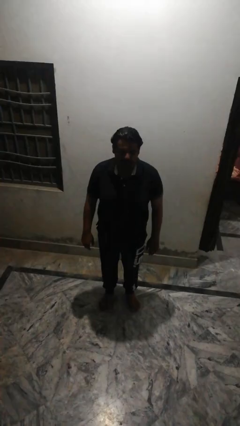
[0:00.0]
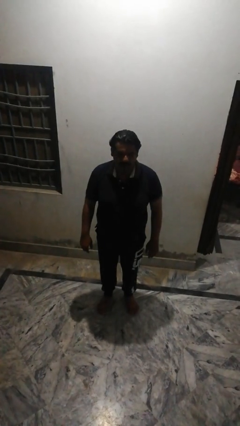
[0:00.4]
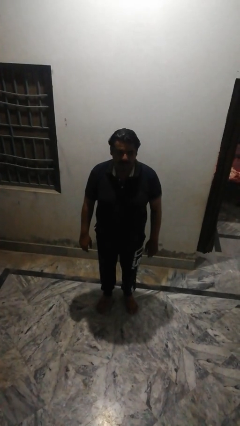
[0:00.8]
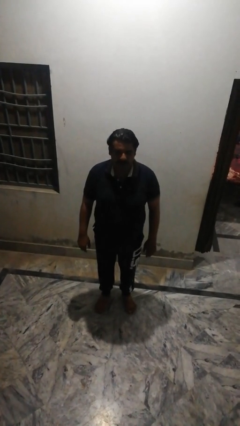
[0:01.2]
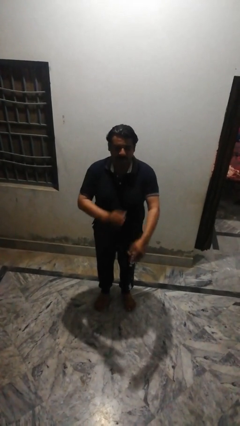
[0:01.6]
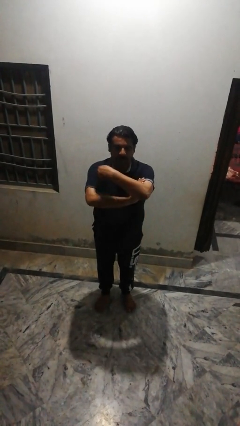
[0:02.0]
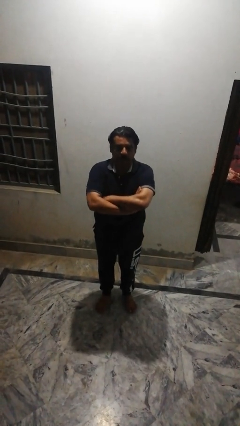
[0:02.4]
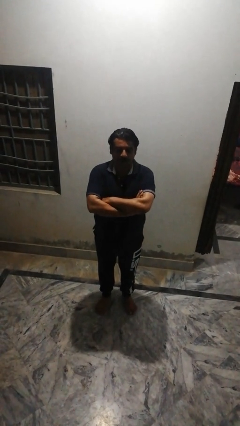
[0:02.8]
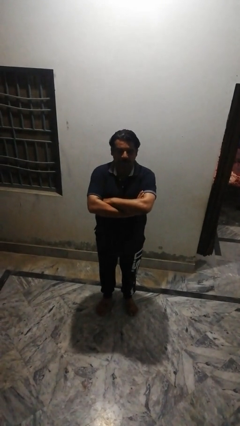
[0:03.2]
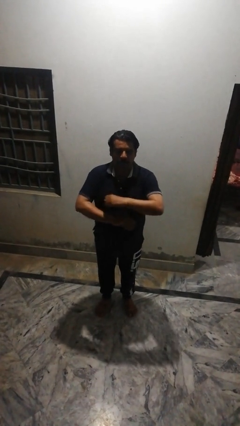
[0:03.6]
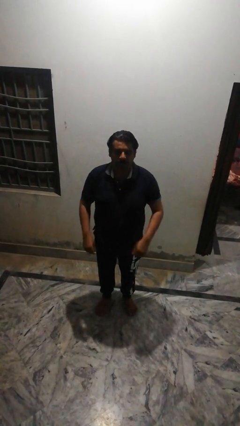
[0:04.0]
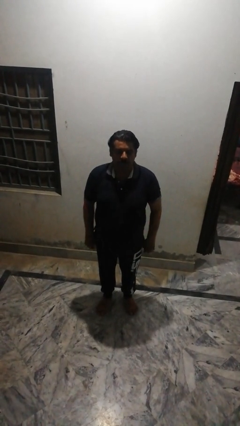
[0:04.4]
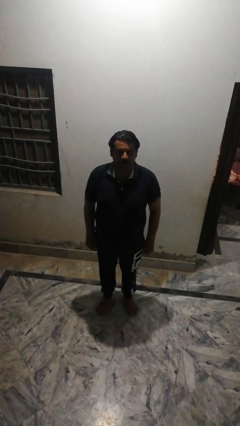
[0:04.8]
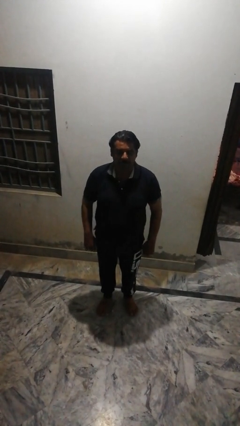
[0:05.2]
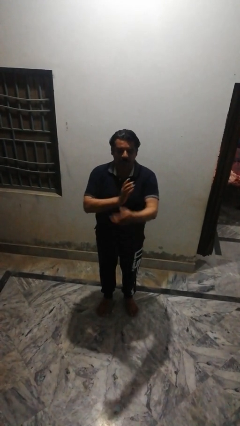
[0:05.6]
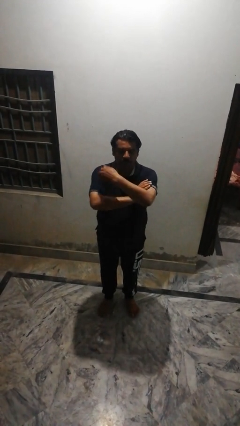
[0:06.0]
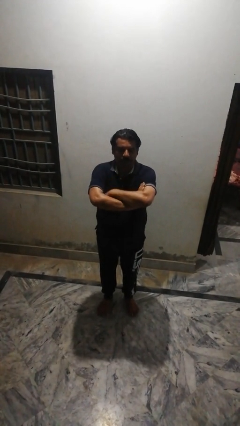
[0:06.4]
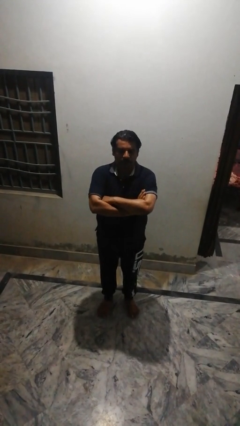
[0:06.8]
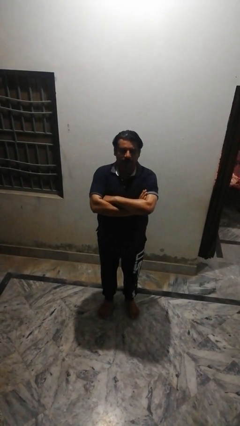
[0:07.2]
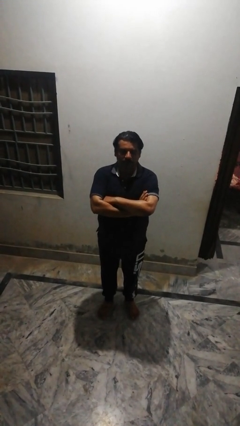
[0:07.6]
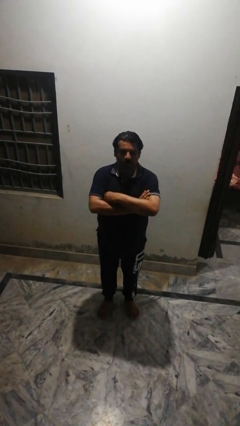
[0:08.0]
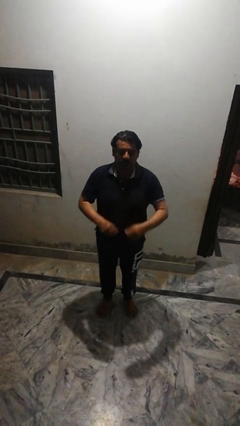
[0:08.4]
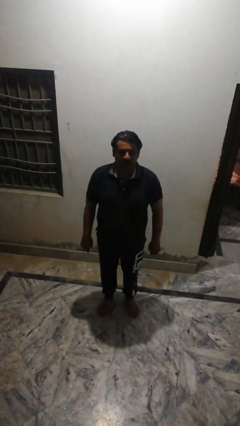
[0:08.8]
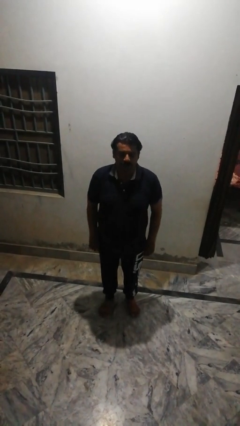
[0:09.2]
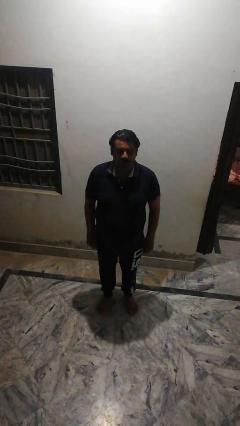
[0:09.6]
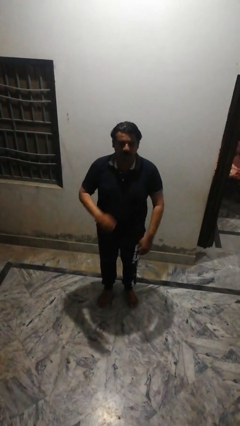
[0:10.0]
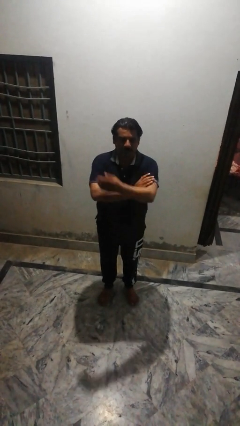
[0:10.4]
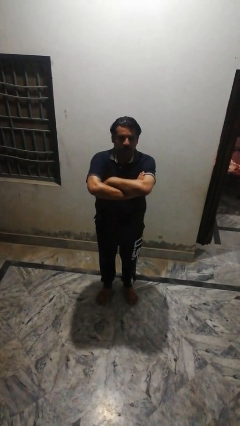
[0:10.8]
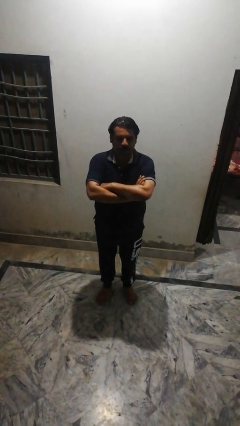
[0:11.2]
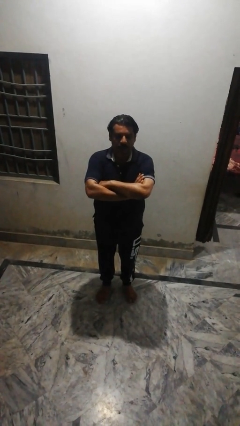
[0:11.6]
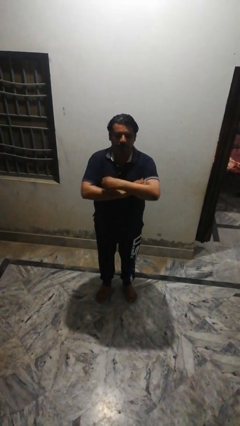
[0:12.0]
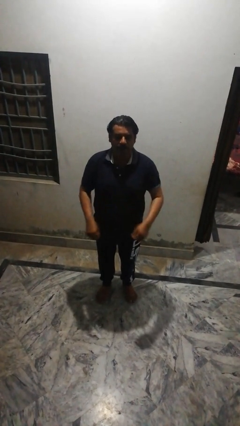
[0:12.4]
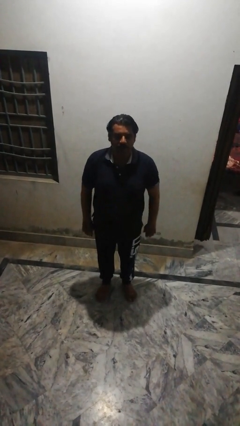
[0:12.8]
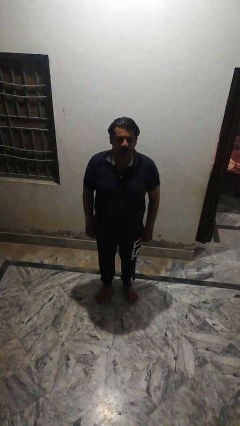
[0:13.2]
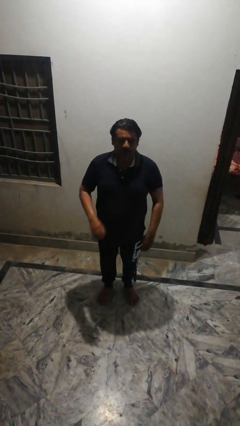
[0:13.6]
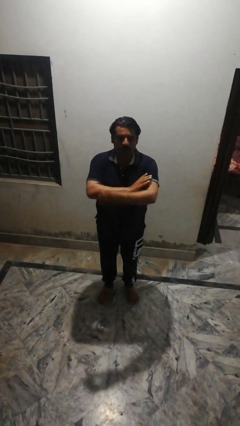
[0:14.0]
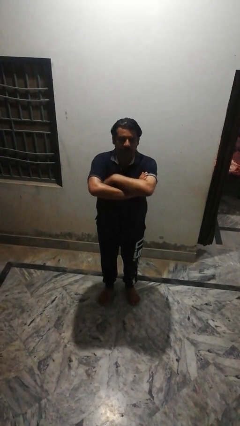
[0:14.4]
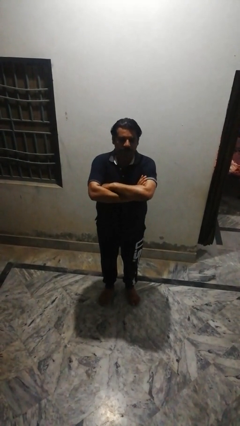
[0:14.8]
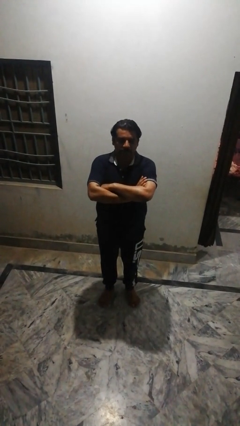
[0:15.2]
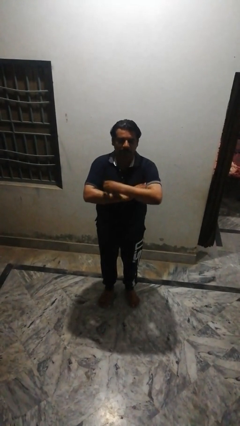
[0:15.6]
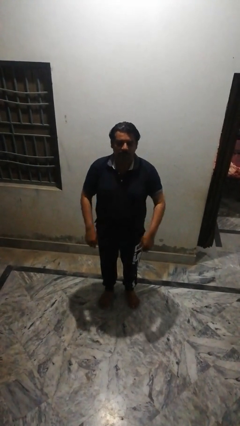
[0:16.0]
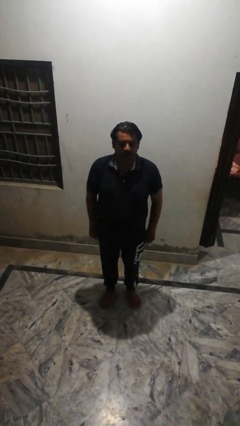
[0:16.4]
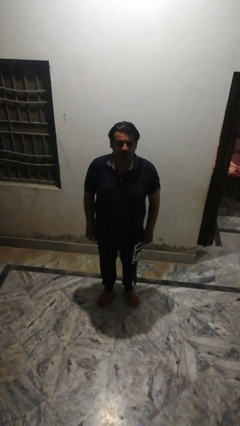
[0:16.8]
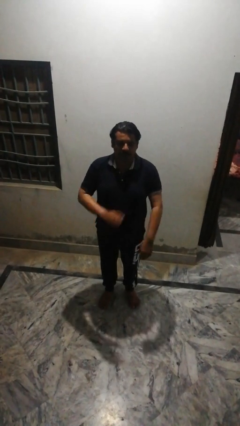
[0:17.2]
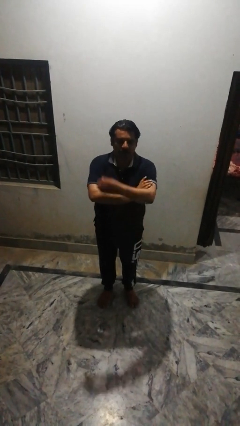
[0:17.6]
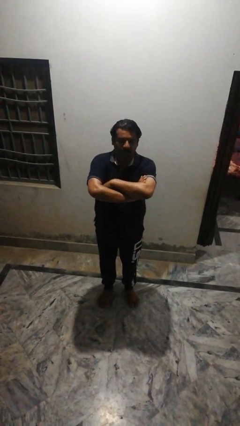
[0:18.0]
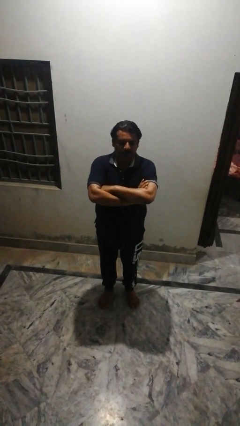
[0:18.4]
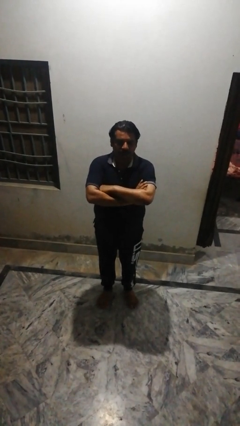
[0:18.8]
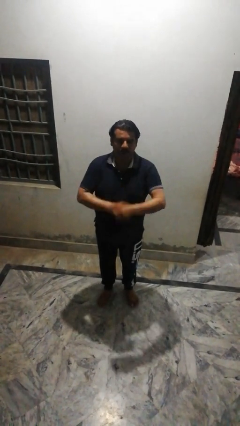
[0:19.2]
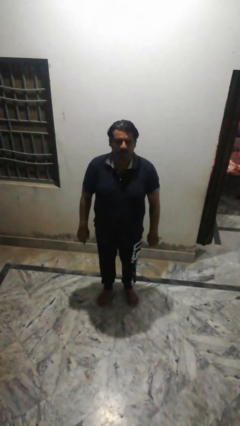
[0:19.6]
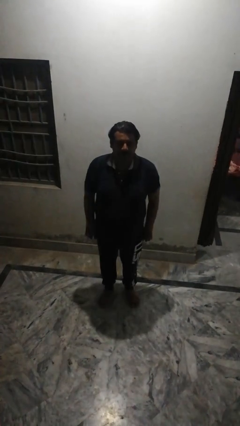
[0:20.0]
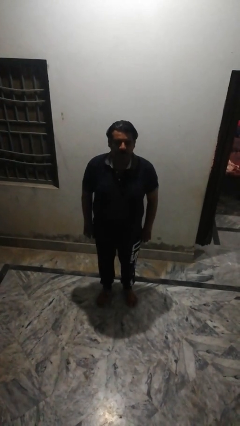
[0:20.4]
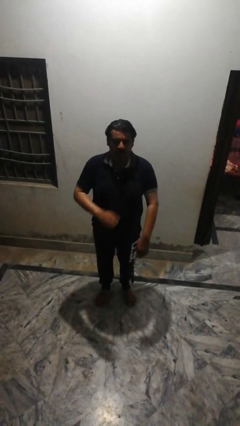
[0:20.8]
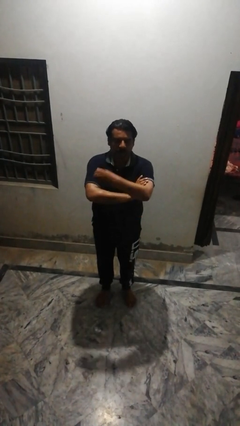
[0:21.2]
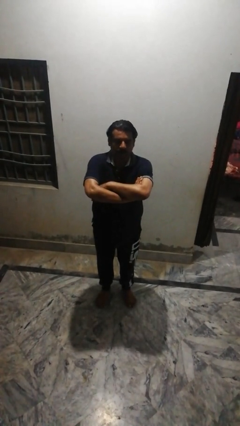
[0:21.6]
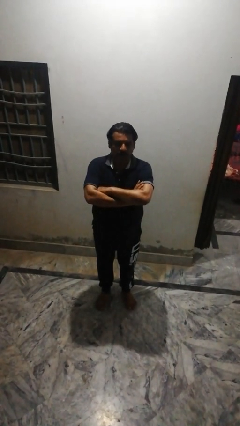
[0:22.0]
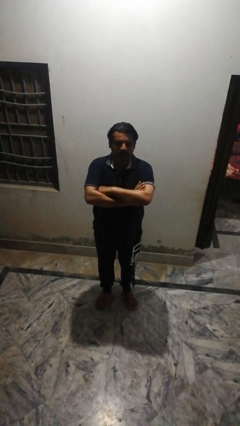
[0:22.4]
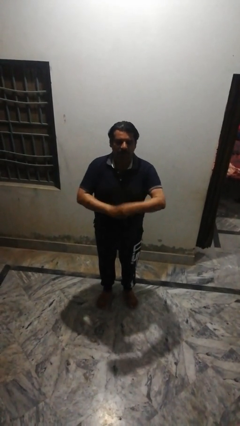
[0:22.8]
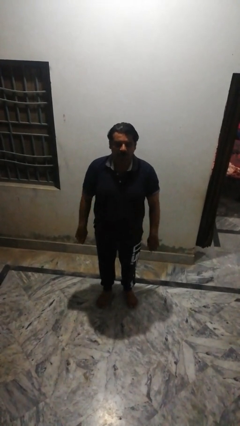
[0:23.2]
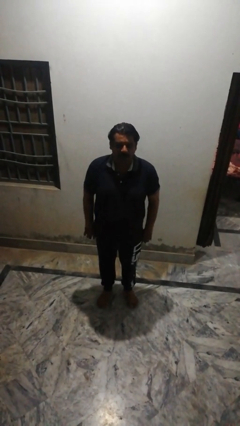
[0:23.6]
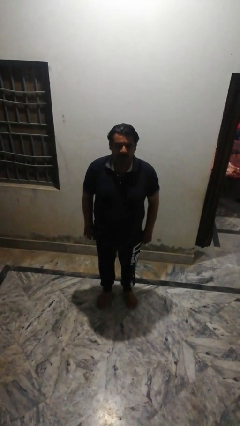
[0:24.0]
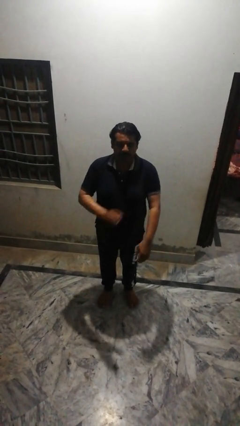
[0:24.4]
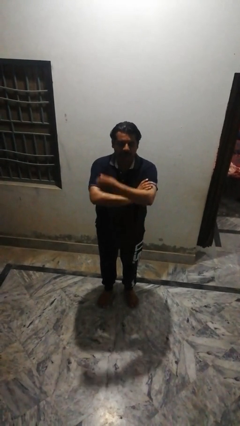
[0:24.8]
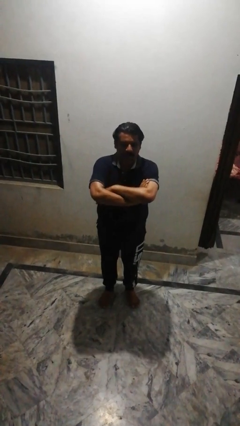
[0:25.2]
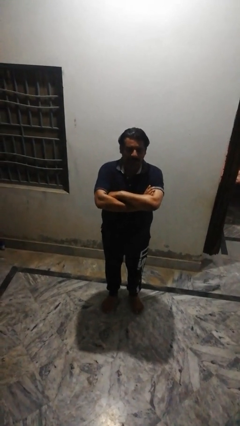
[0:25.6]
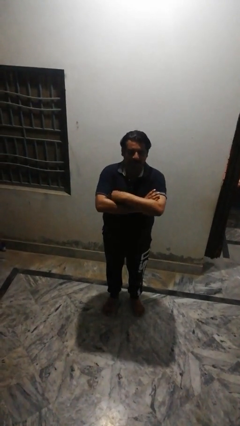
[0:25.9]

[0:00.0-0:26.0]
person crosses arms

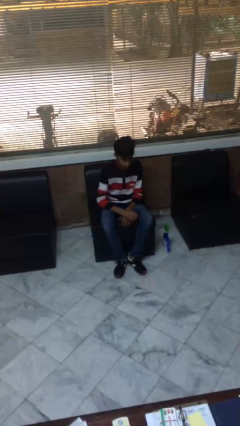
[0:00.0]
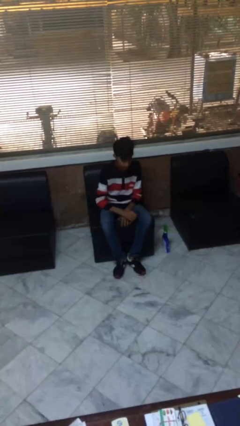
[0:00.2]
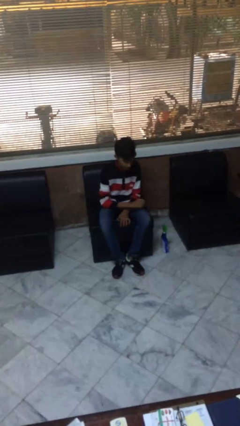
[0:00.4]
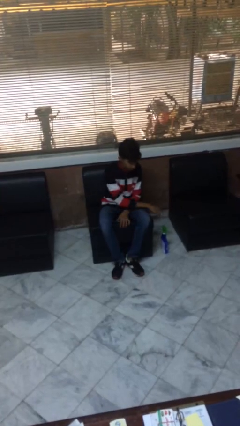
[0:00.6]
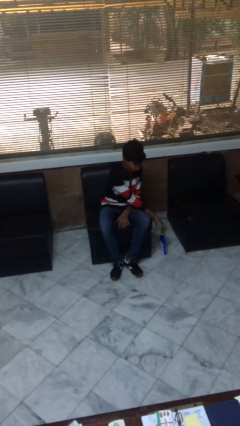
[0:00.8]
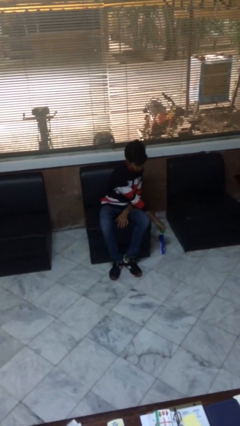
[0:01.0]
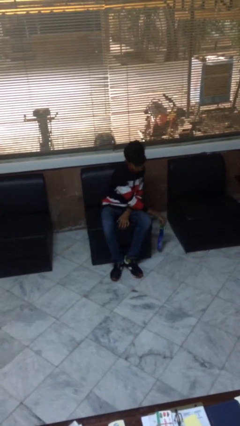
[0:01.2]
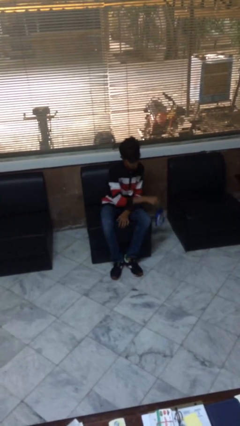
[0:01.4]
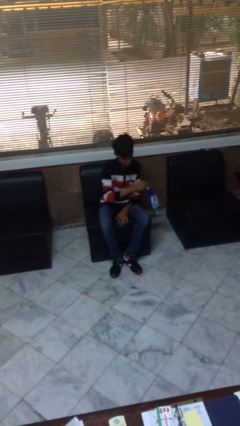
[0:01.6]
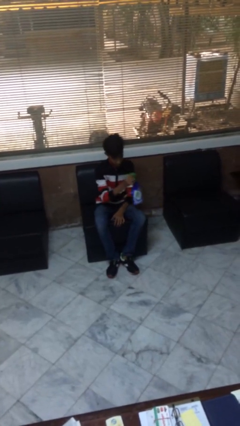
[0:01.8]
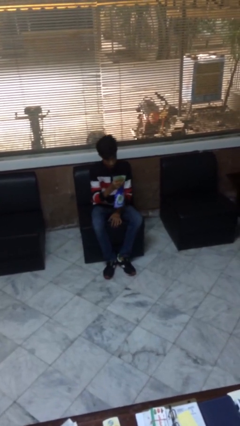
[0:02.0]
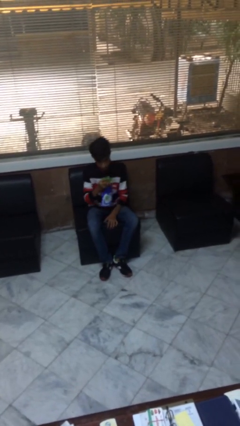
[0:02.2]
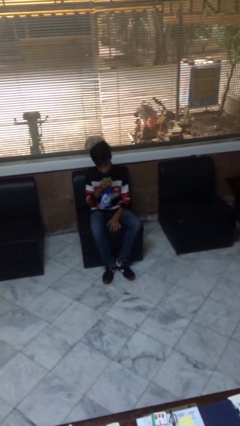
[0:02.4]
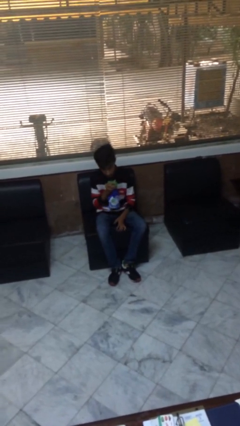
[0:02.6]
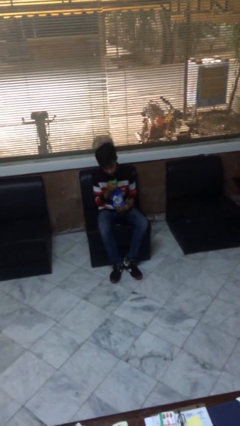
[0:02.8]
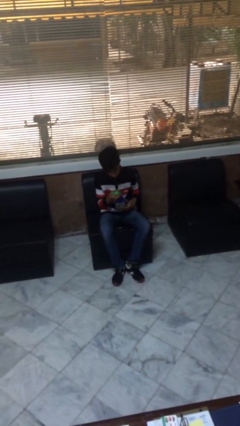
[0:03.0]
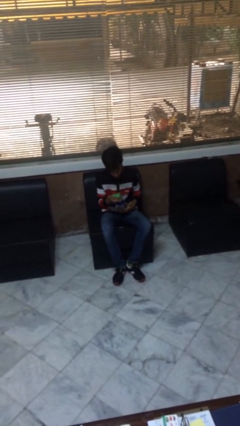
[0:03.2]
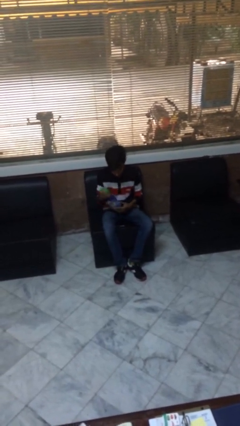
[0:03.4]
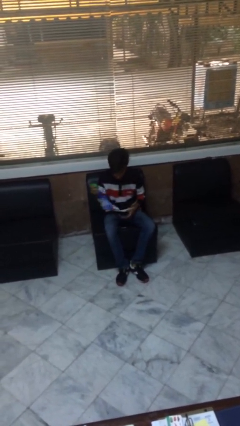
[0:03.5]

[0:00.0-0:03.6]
person picks up object from floor

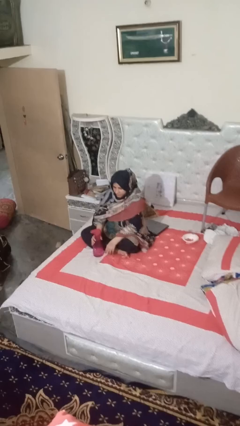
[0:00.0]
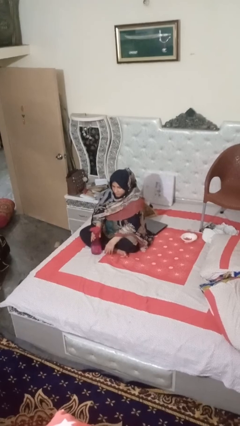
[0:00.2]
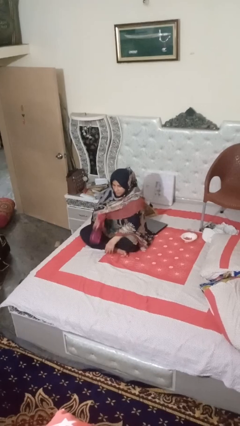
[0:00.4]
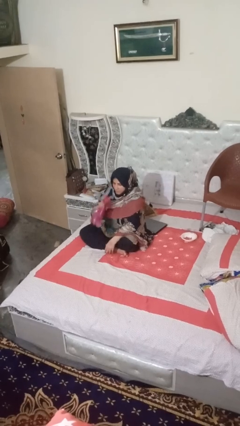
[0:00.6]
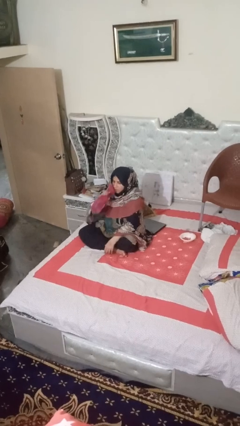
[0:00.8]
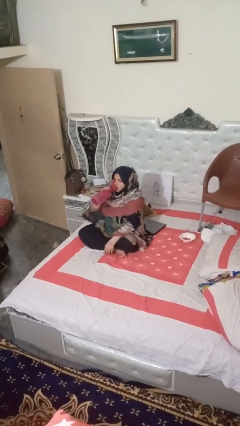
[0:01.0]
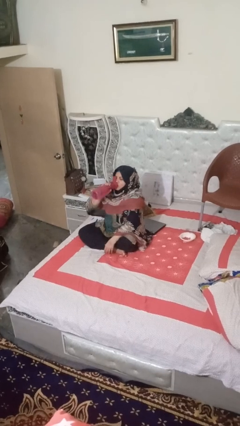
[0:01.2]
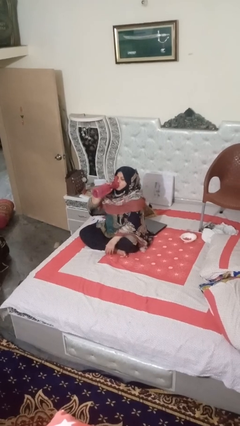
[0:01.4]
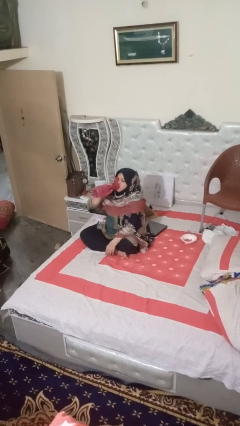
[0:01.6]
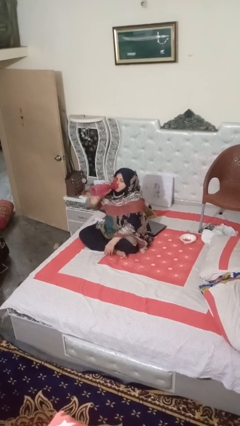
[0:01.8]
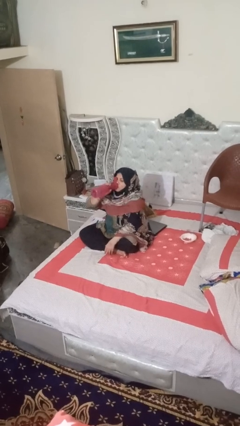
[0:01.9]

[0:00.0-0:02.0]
person drinks from bottle
